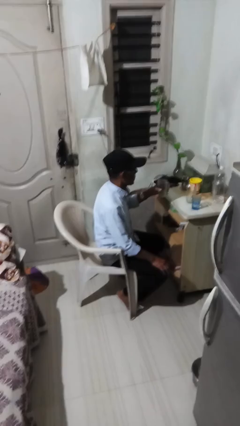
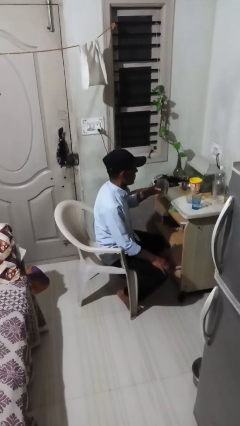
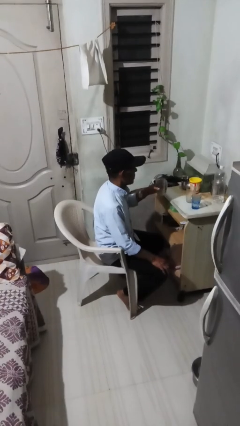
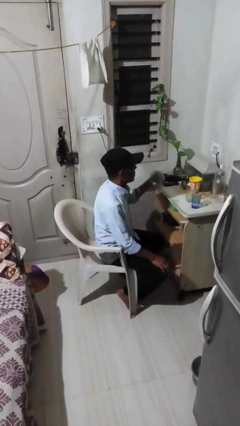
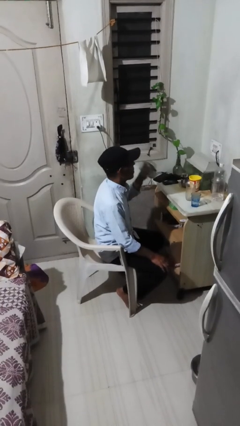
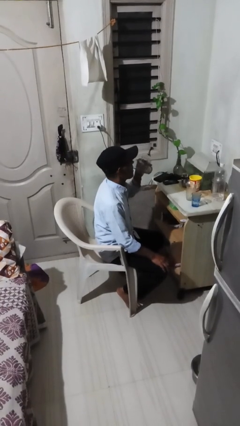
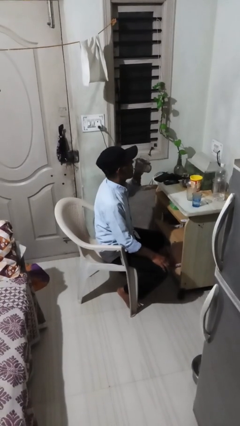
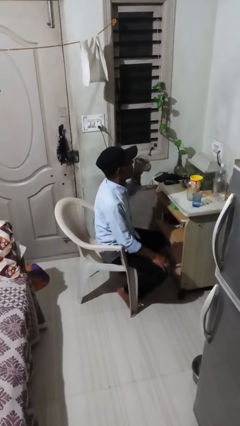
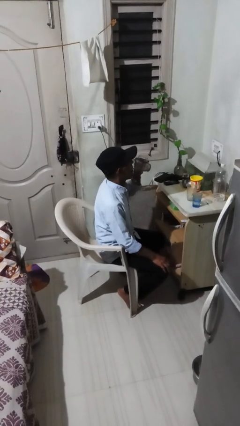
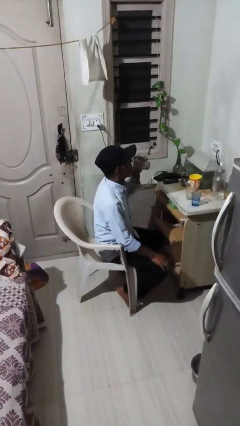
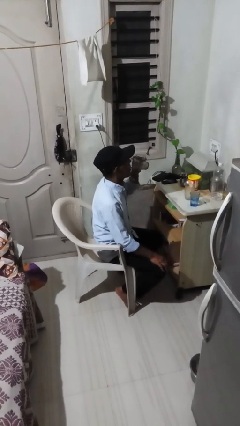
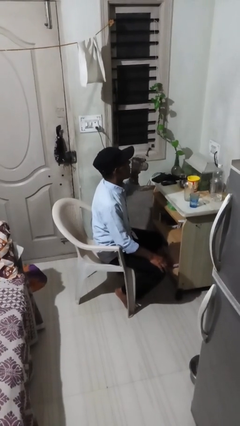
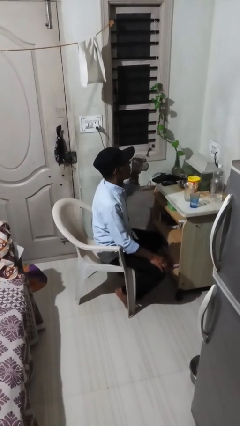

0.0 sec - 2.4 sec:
person drinks from shotglass

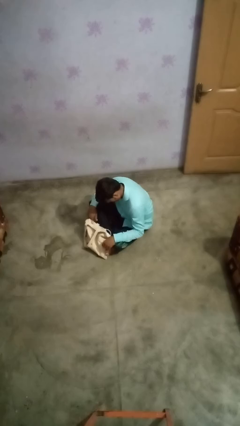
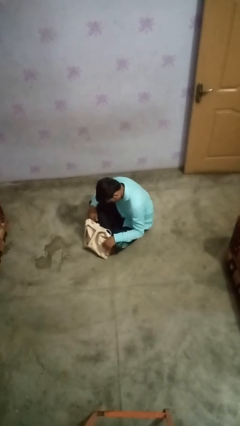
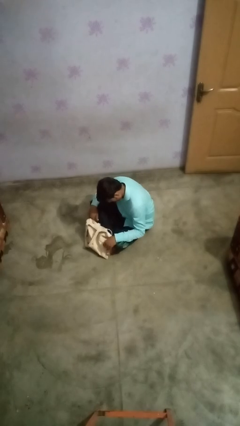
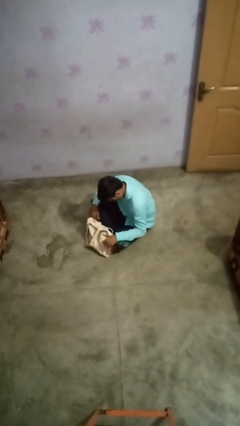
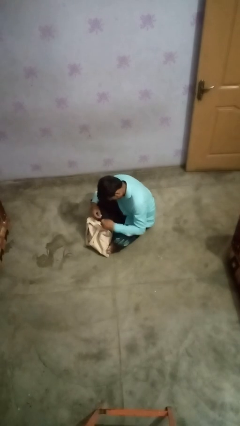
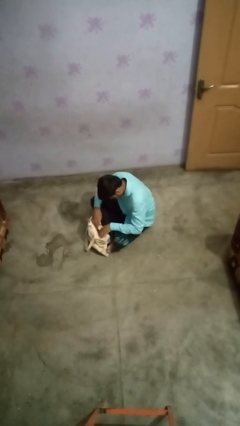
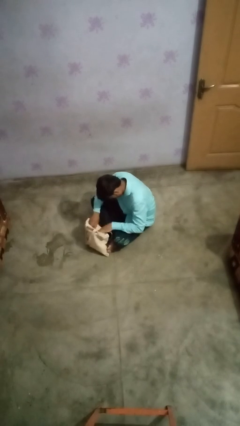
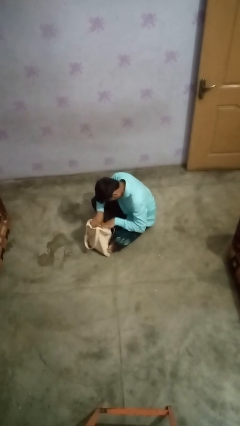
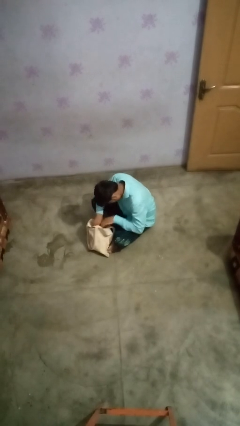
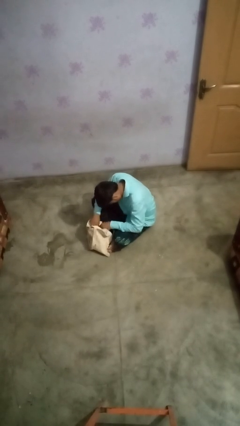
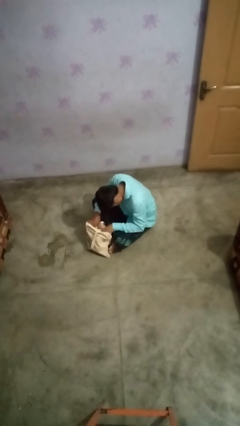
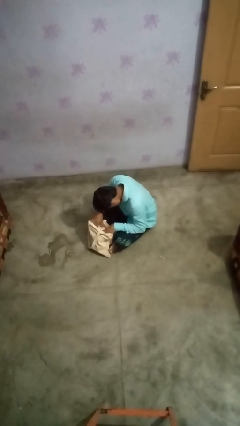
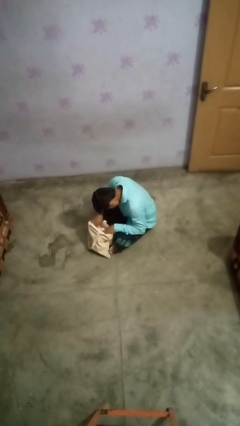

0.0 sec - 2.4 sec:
person searches in bag

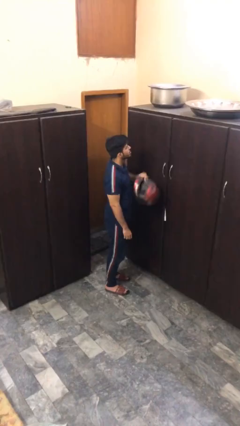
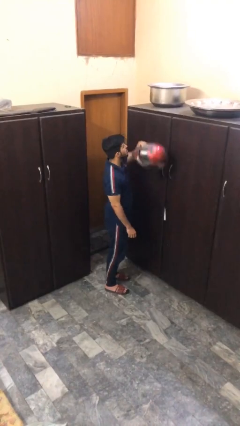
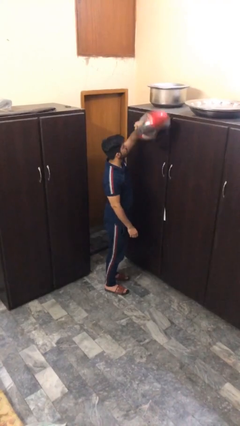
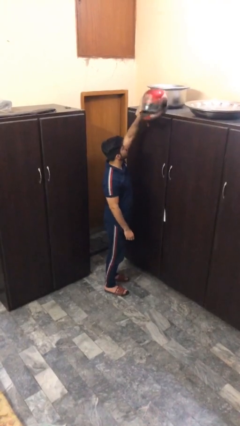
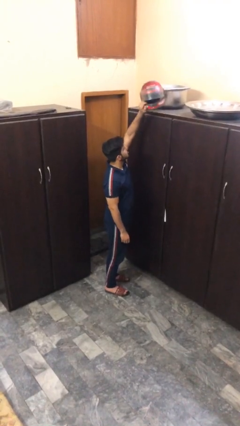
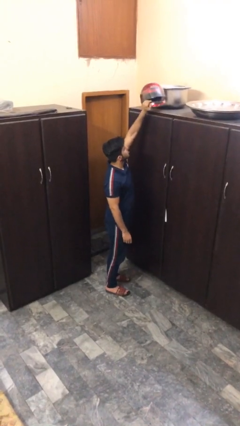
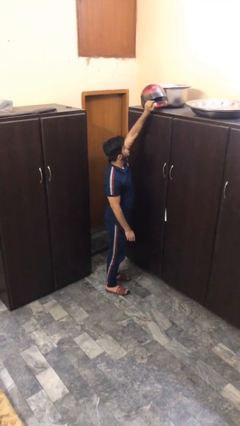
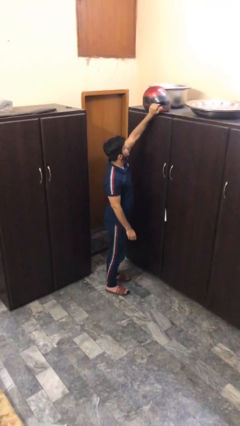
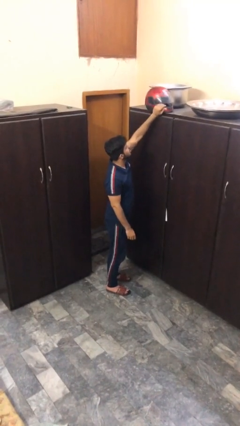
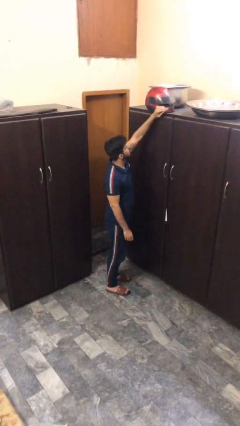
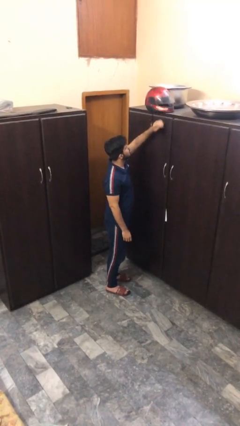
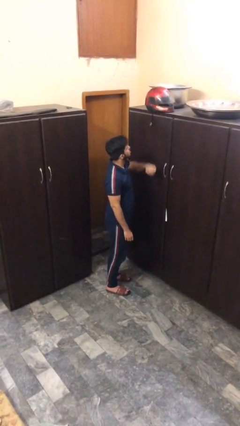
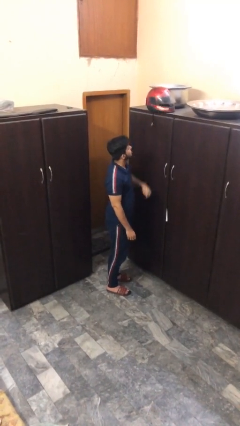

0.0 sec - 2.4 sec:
person puts down object on shelf

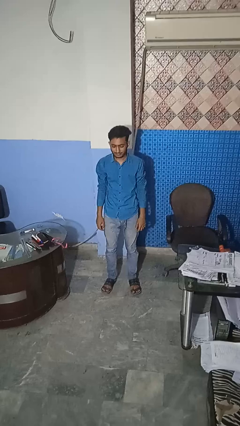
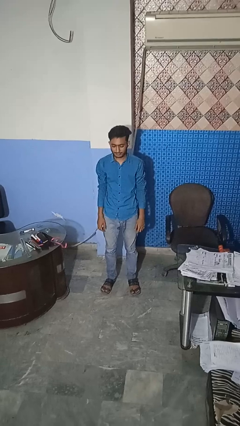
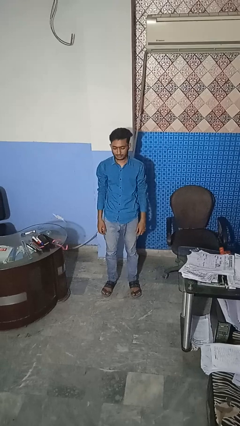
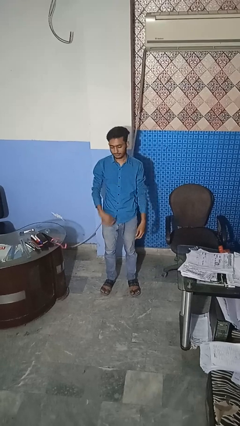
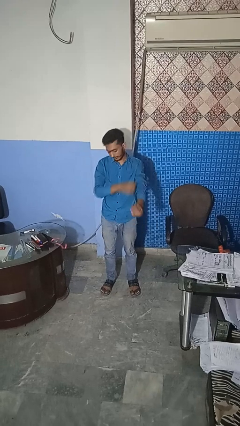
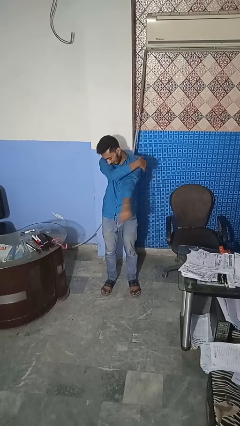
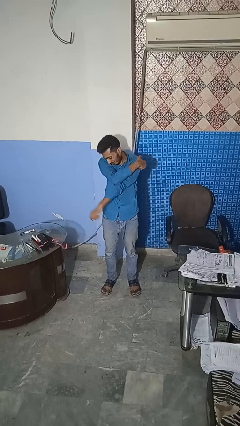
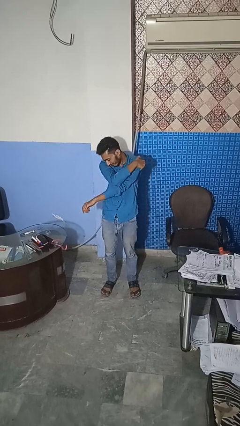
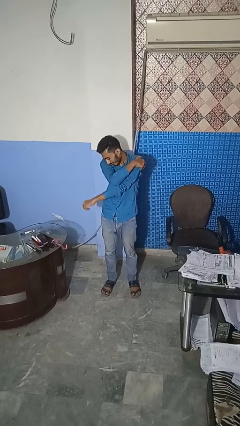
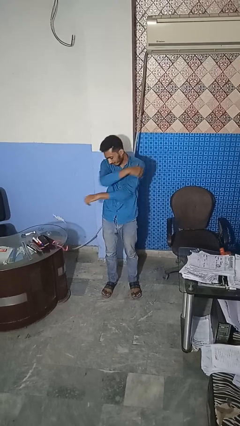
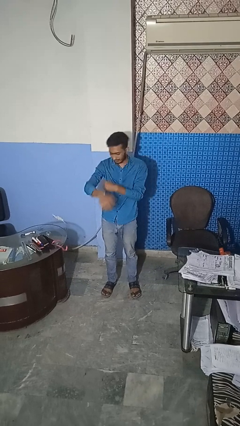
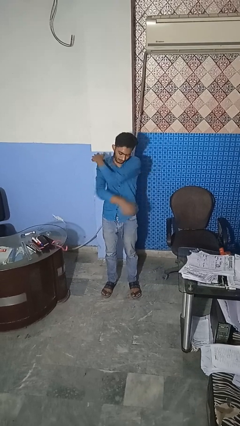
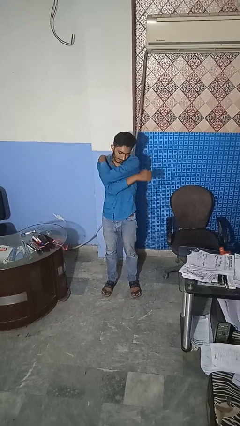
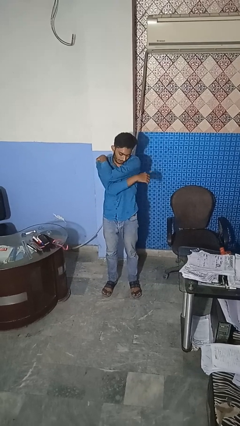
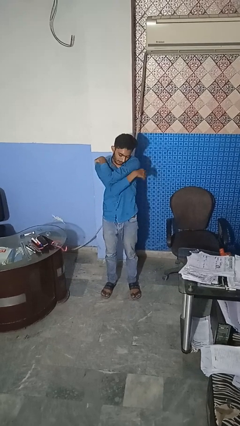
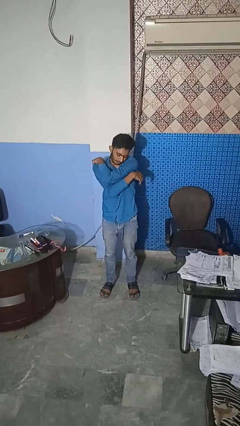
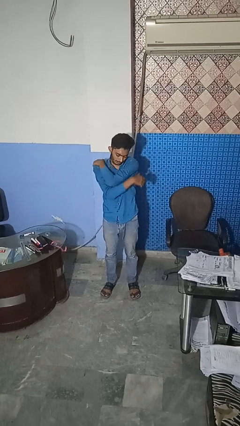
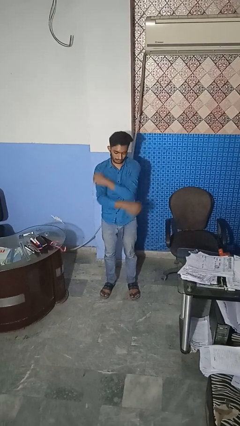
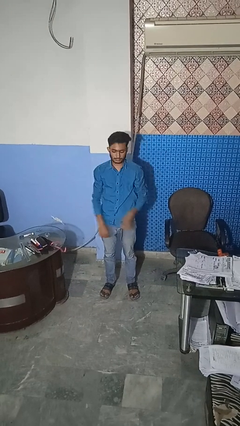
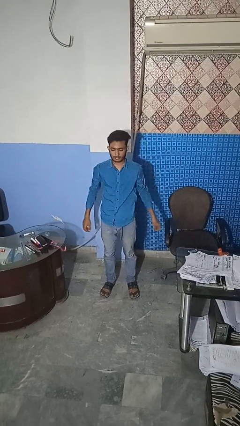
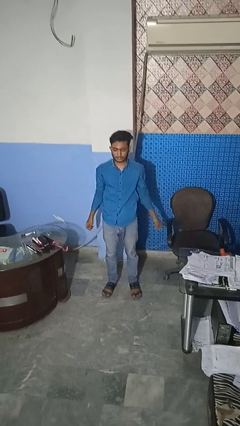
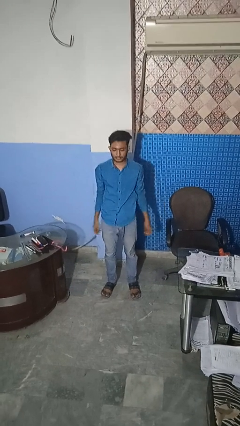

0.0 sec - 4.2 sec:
person stretches arms to side

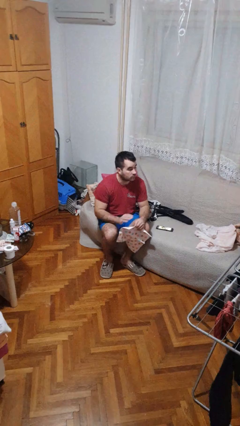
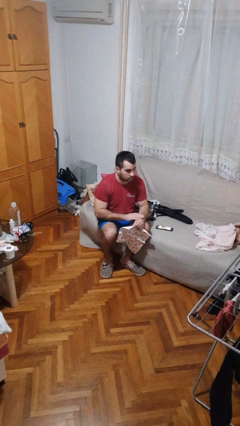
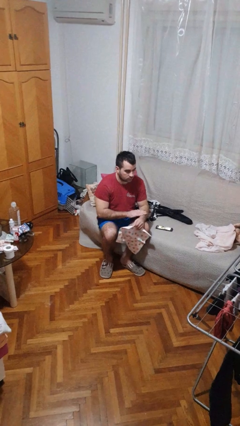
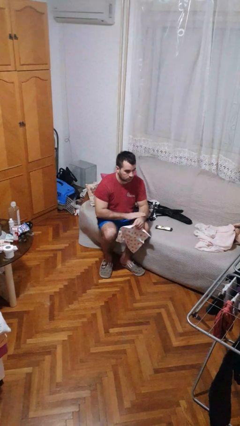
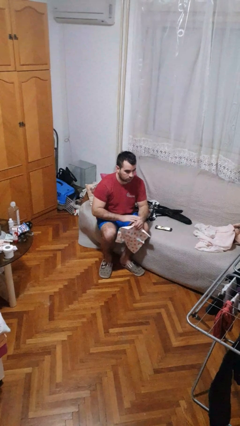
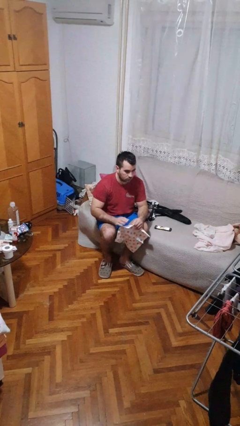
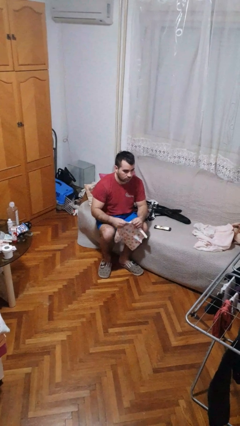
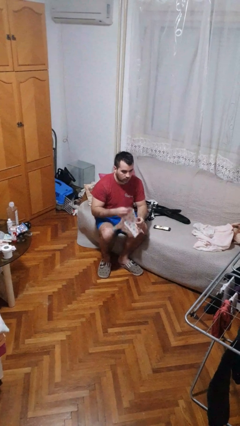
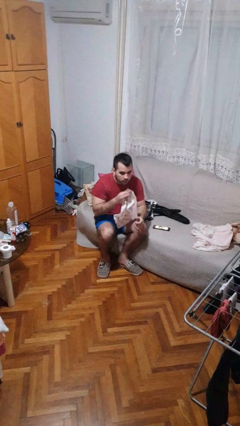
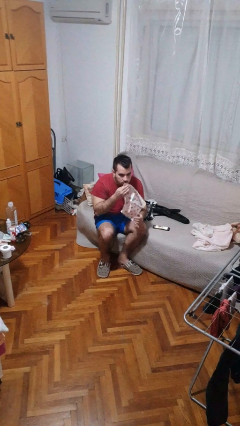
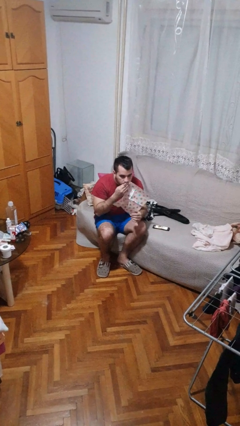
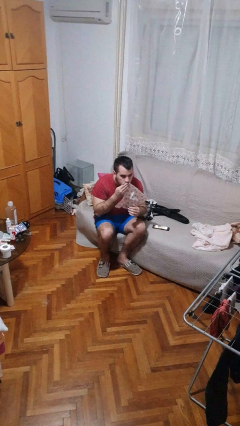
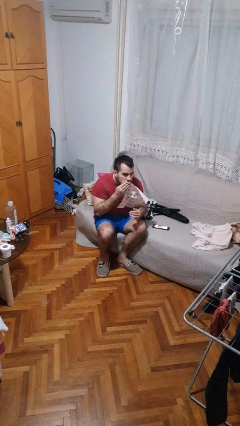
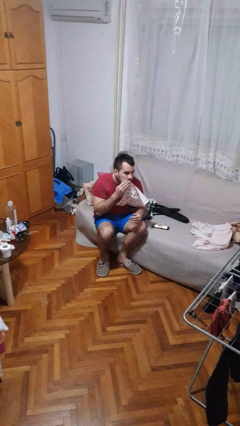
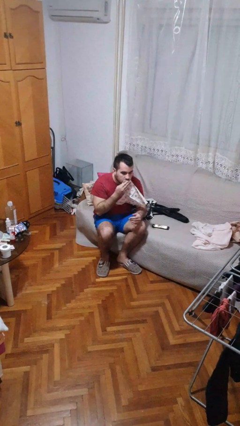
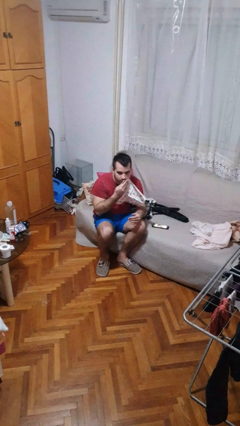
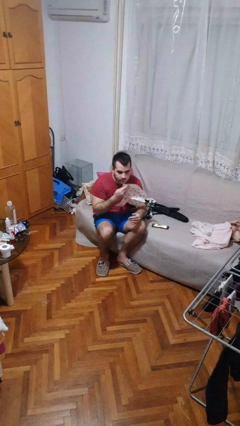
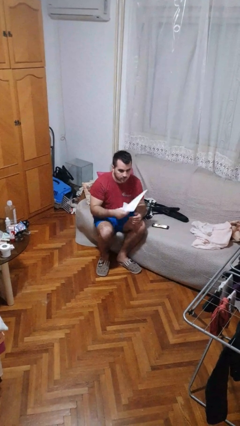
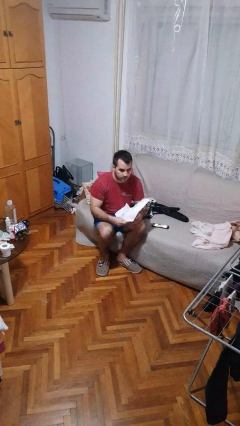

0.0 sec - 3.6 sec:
person wipes mouth with napkin

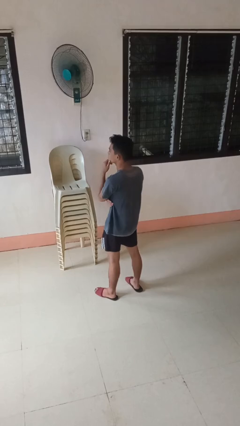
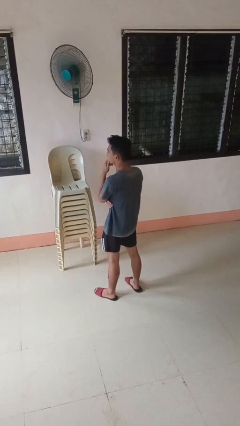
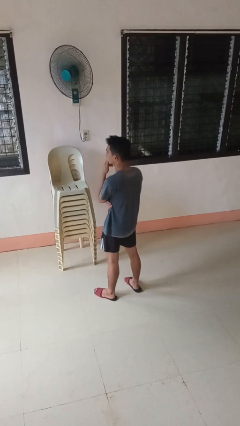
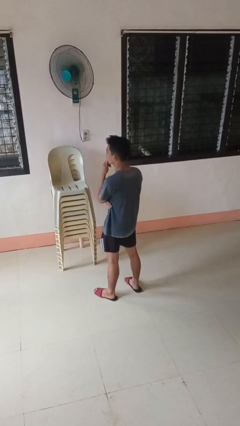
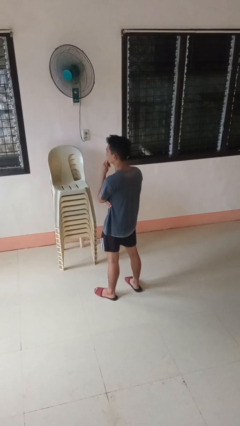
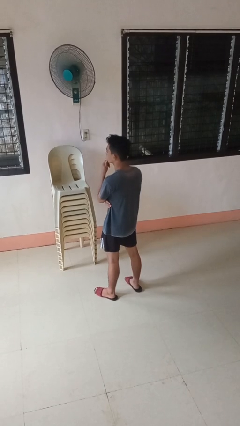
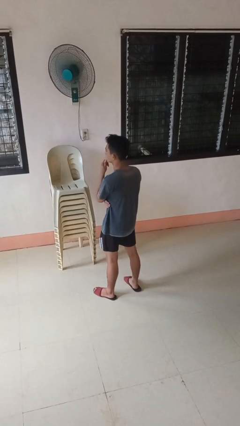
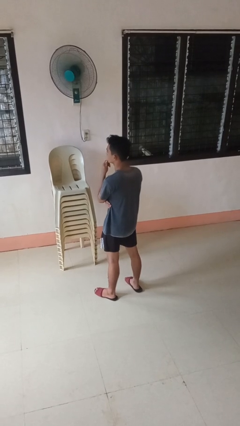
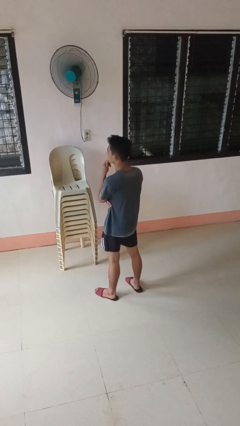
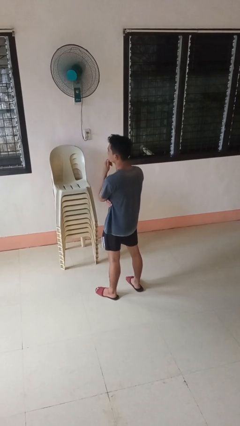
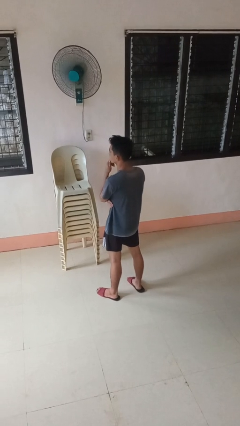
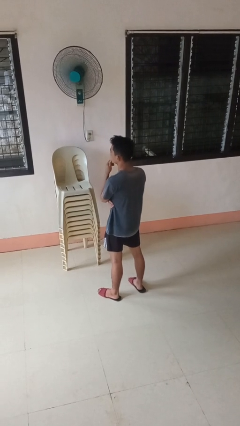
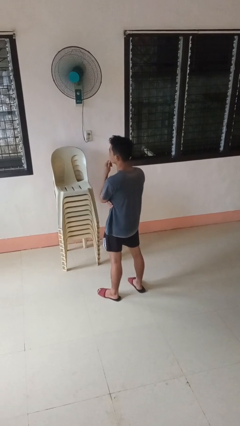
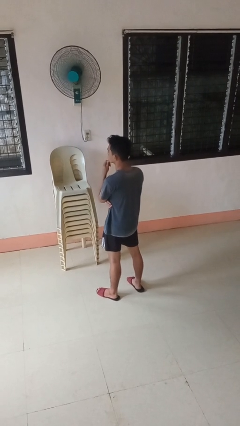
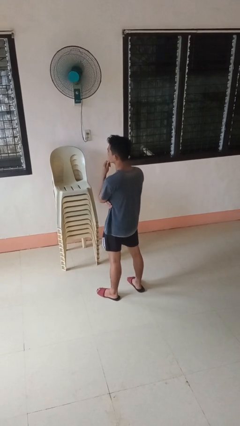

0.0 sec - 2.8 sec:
person strokes chin
